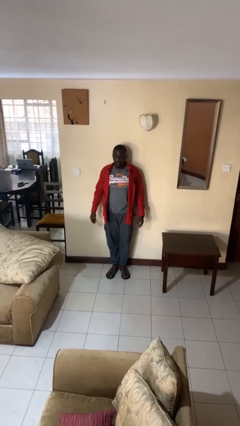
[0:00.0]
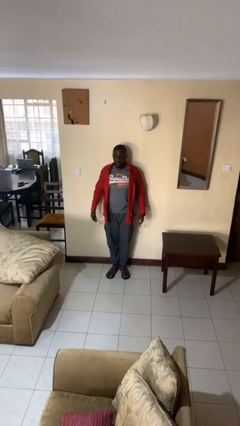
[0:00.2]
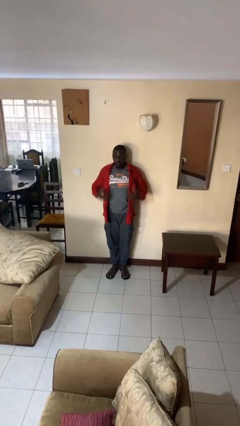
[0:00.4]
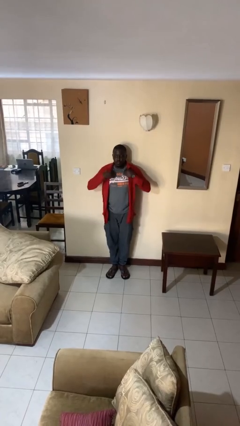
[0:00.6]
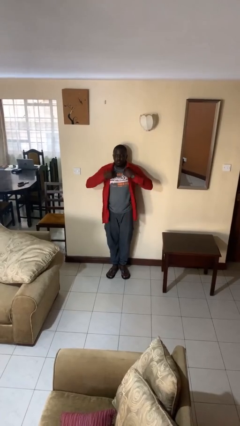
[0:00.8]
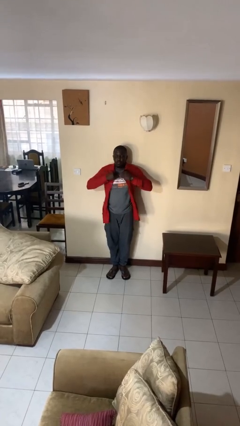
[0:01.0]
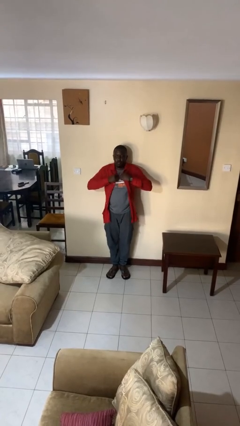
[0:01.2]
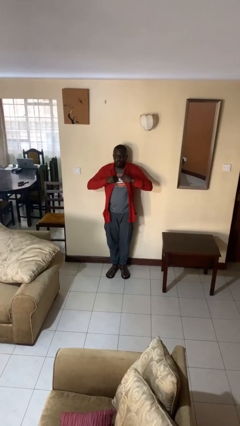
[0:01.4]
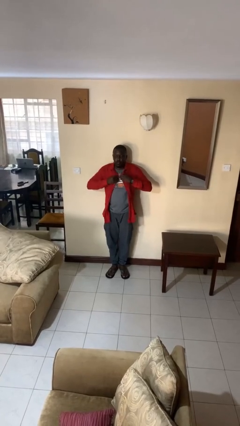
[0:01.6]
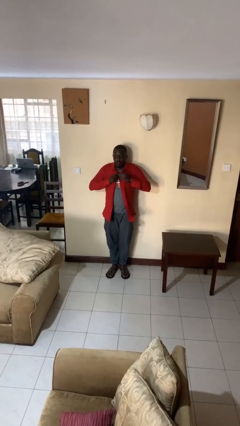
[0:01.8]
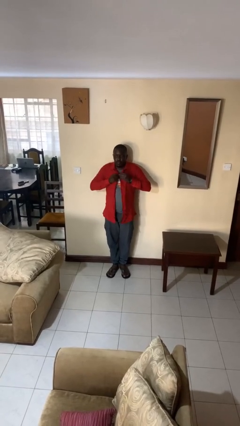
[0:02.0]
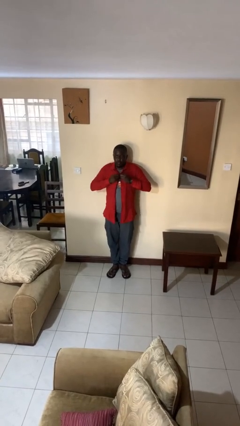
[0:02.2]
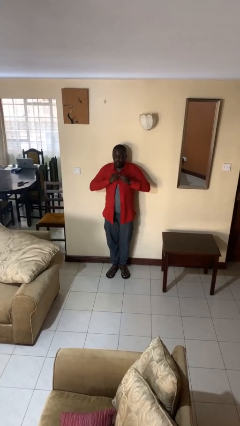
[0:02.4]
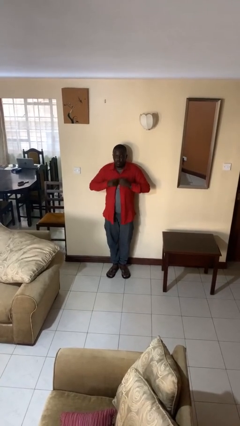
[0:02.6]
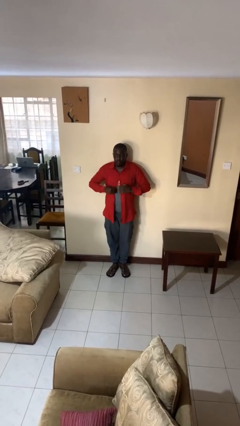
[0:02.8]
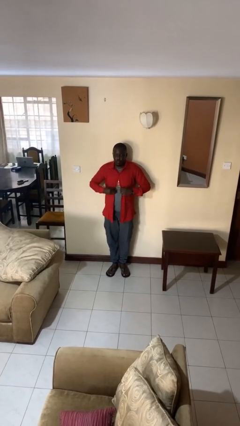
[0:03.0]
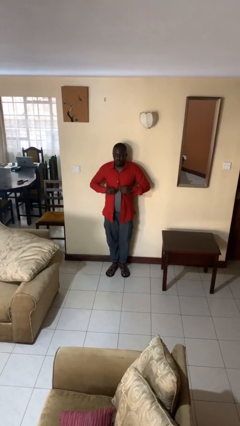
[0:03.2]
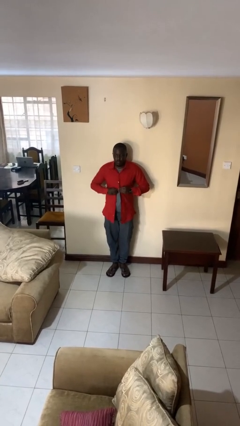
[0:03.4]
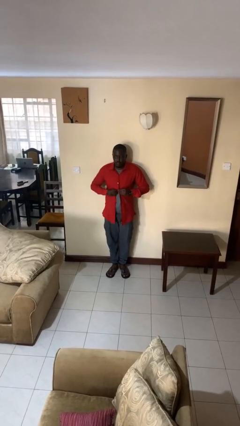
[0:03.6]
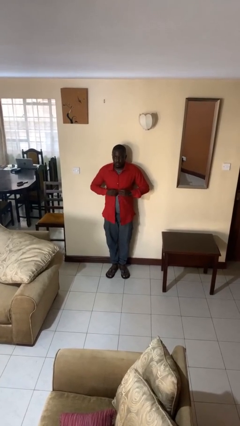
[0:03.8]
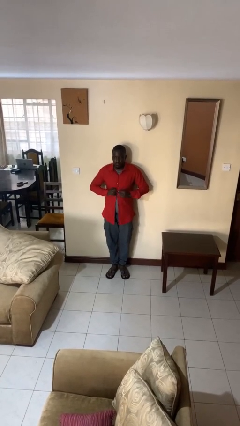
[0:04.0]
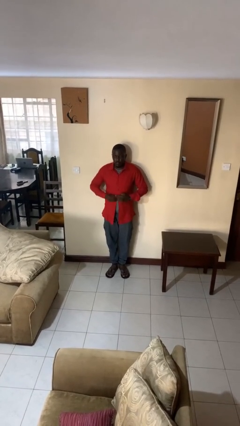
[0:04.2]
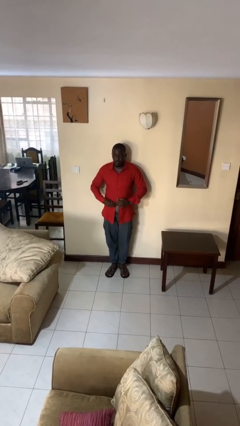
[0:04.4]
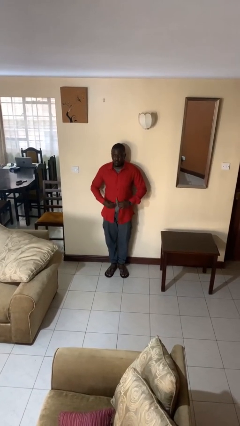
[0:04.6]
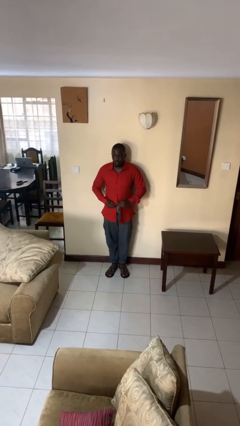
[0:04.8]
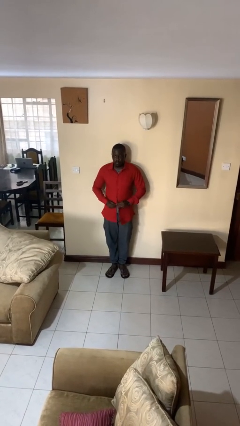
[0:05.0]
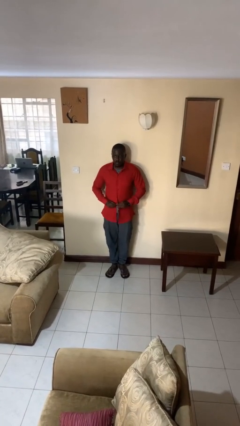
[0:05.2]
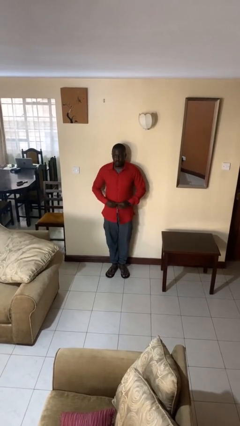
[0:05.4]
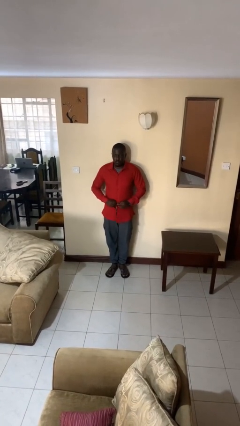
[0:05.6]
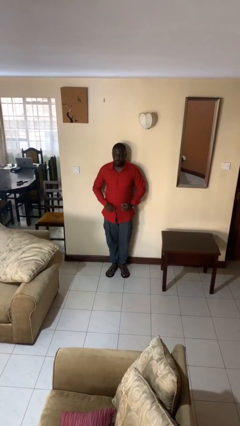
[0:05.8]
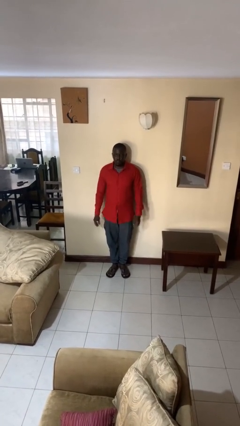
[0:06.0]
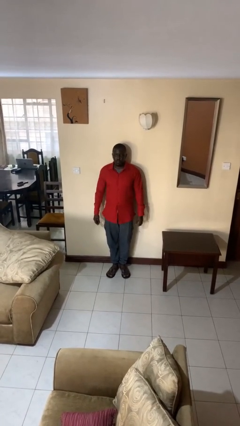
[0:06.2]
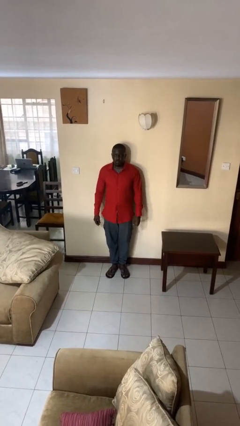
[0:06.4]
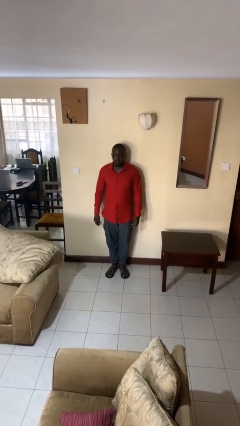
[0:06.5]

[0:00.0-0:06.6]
person buttons shirt

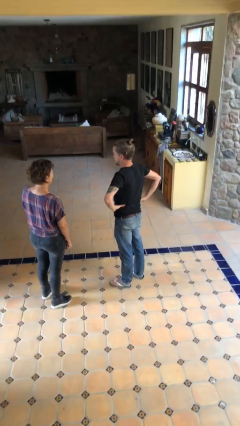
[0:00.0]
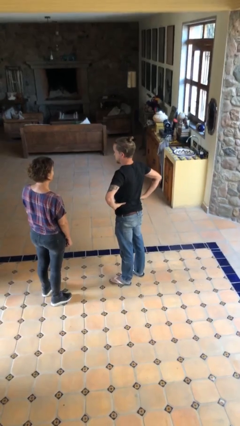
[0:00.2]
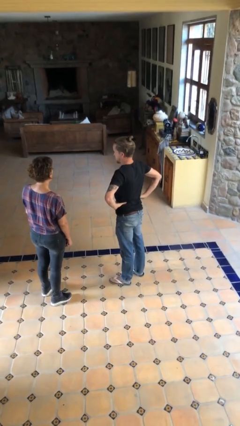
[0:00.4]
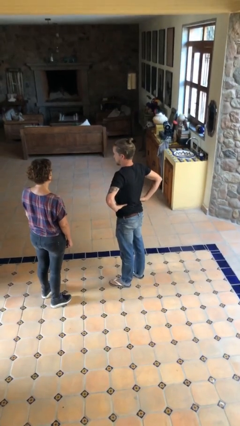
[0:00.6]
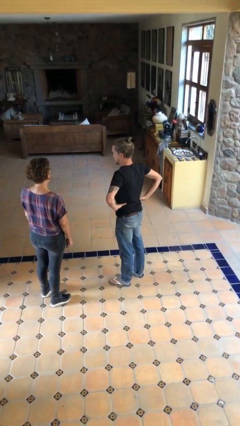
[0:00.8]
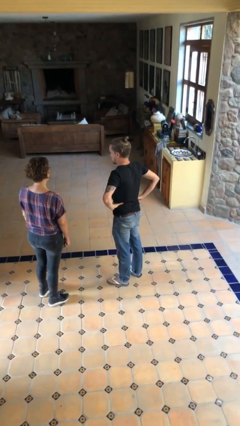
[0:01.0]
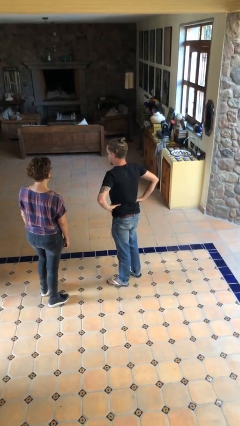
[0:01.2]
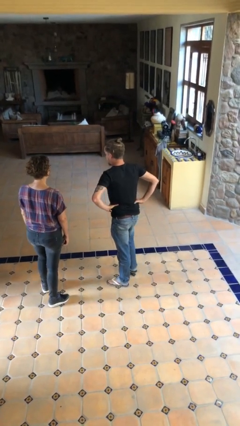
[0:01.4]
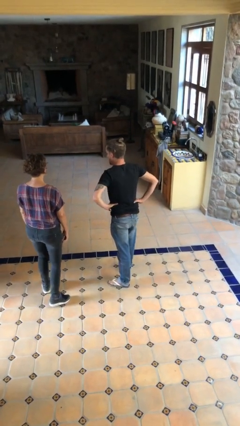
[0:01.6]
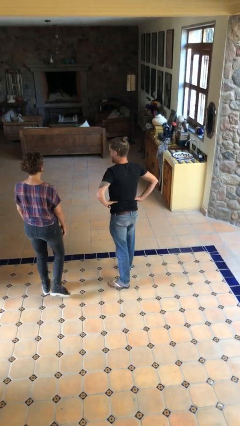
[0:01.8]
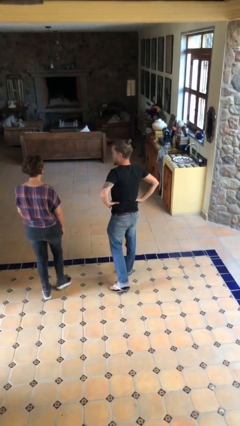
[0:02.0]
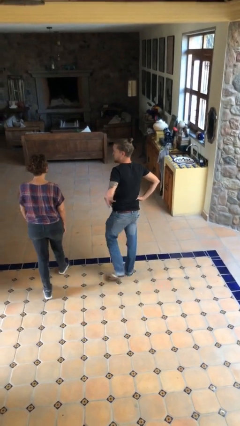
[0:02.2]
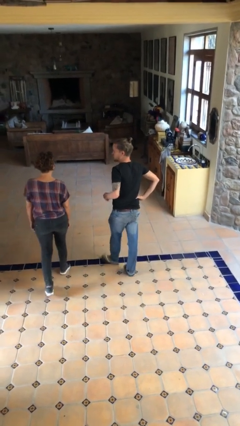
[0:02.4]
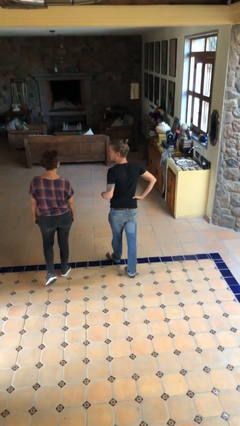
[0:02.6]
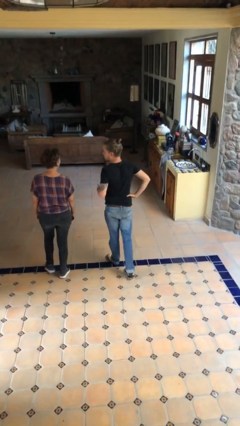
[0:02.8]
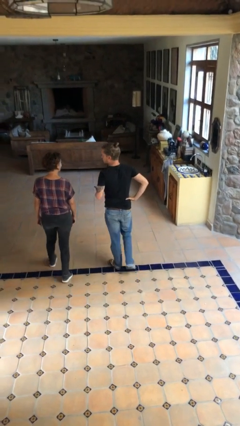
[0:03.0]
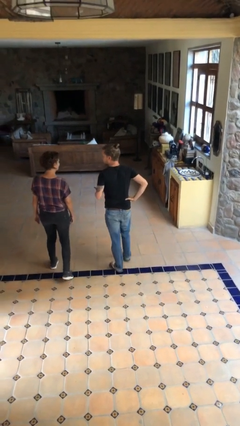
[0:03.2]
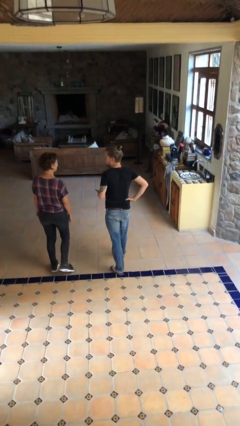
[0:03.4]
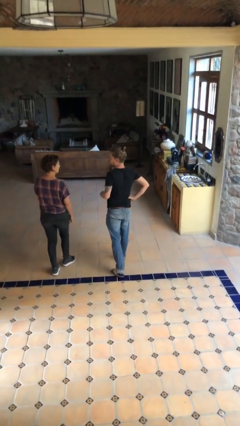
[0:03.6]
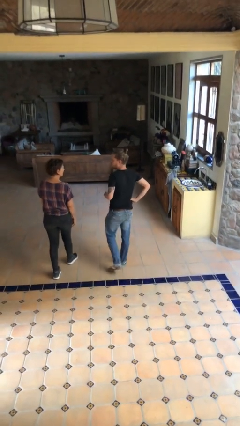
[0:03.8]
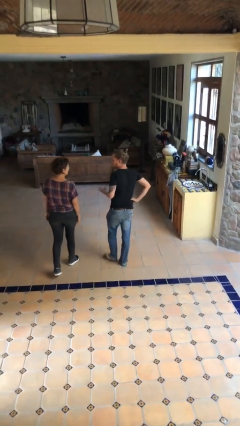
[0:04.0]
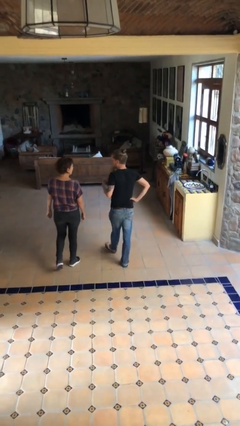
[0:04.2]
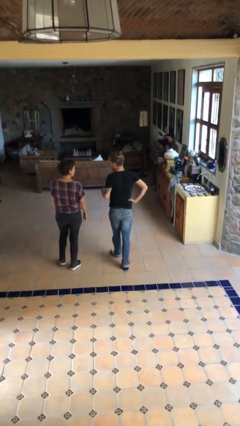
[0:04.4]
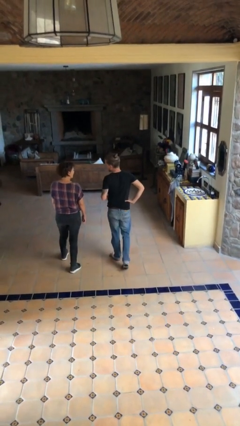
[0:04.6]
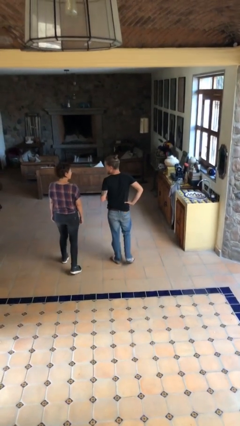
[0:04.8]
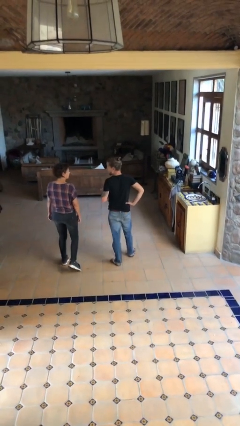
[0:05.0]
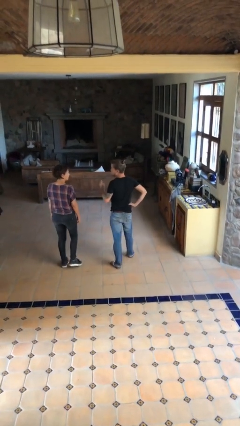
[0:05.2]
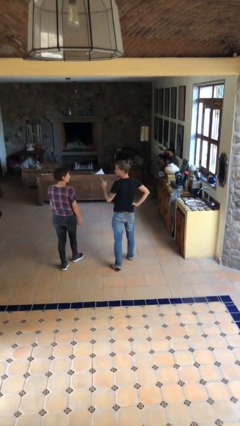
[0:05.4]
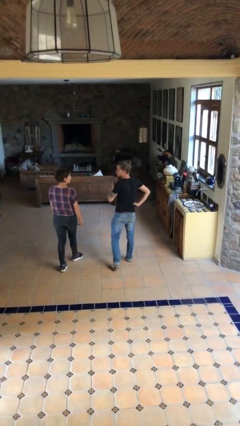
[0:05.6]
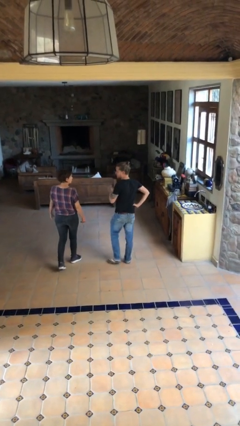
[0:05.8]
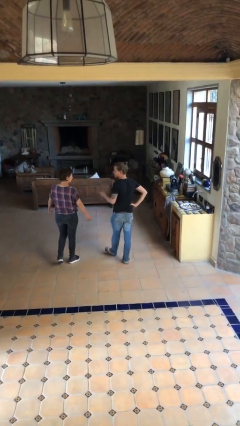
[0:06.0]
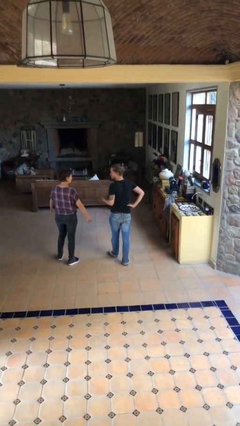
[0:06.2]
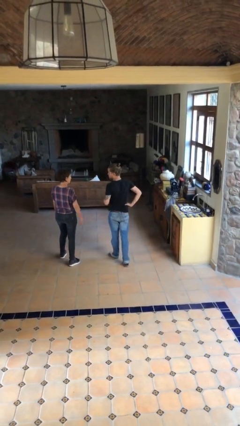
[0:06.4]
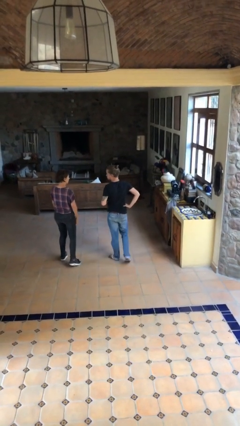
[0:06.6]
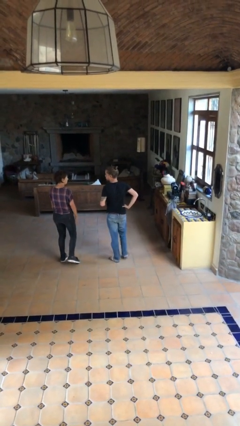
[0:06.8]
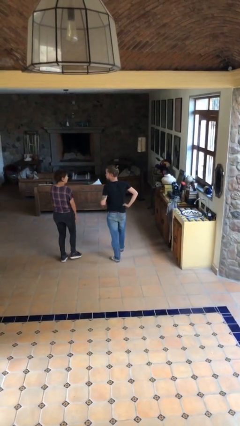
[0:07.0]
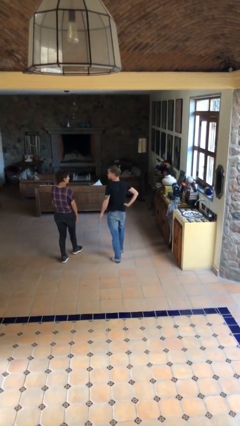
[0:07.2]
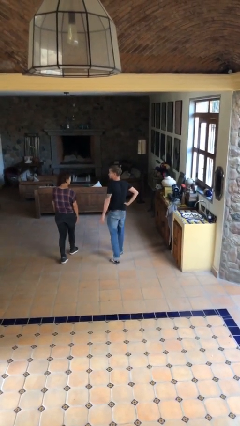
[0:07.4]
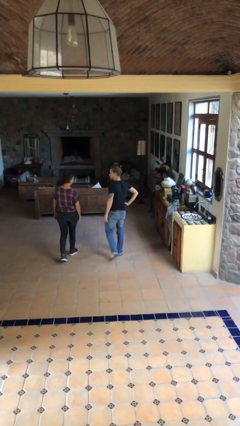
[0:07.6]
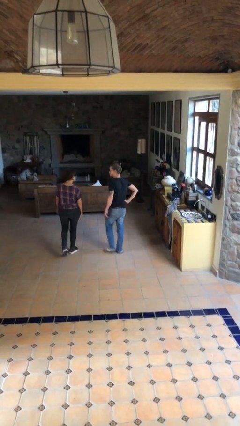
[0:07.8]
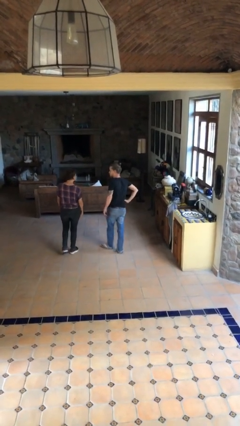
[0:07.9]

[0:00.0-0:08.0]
person talks to person

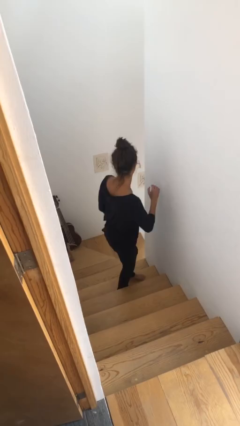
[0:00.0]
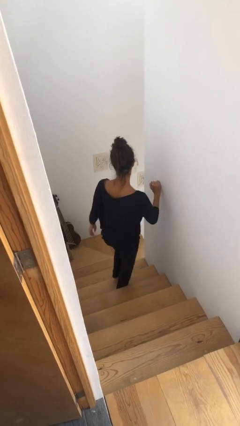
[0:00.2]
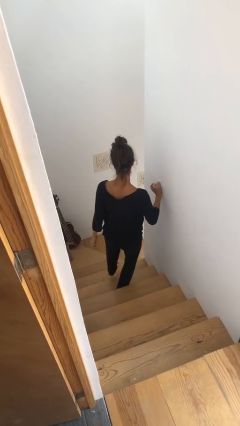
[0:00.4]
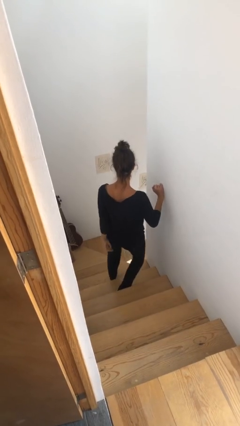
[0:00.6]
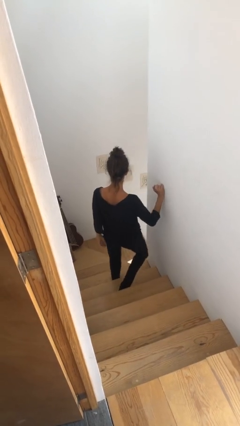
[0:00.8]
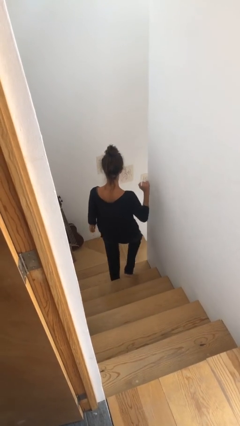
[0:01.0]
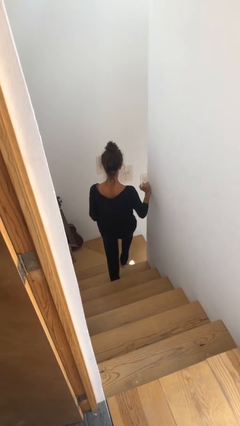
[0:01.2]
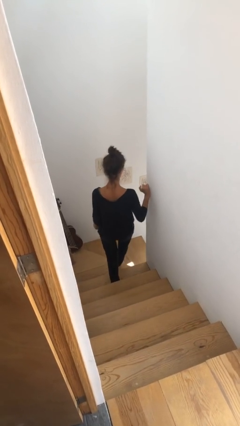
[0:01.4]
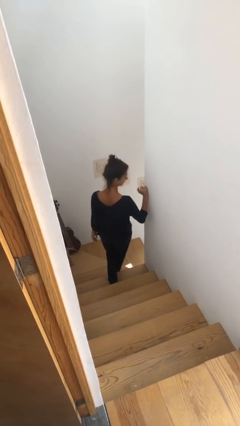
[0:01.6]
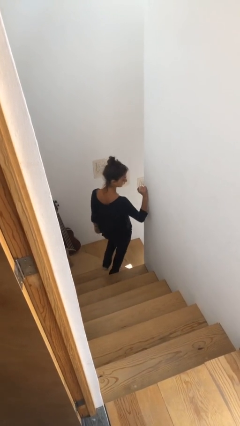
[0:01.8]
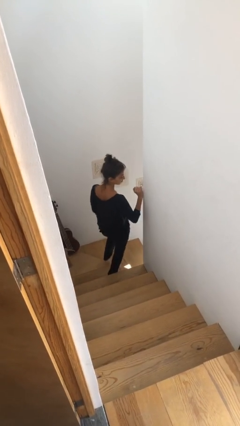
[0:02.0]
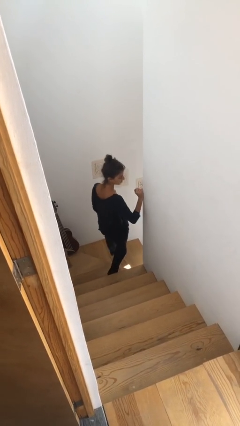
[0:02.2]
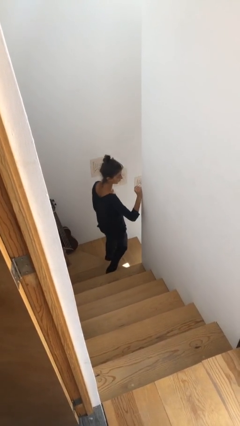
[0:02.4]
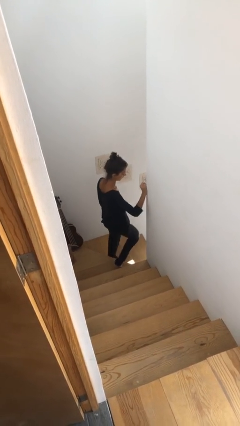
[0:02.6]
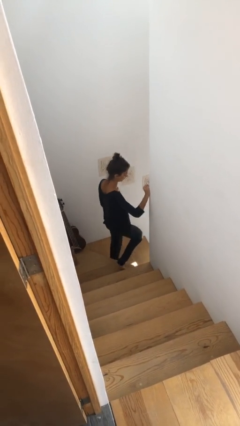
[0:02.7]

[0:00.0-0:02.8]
person climbs down stairs

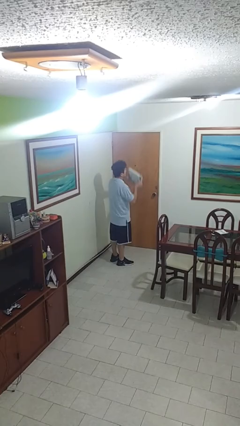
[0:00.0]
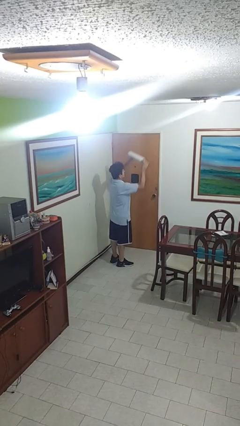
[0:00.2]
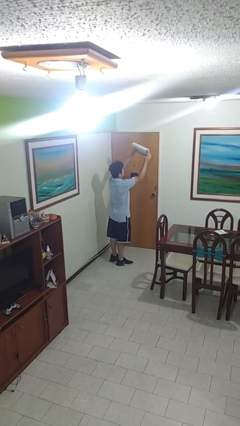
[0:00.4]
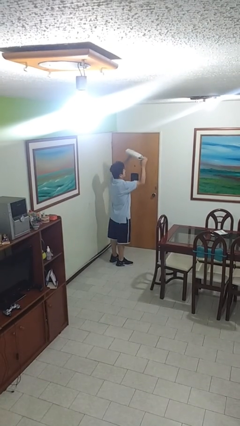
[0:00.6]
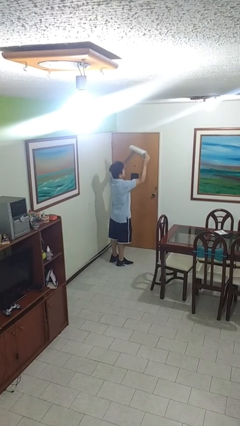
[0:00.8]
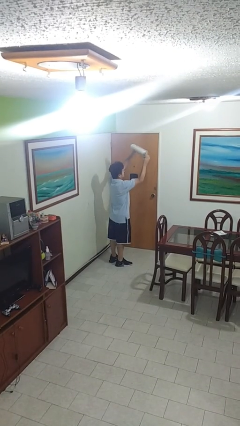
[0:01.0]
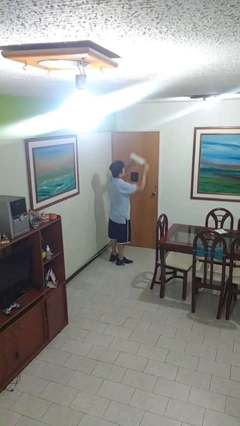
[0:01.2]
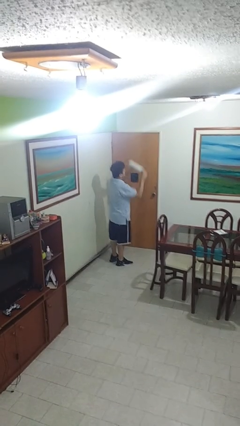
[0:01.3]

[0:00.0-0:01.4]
person holds object above head
